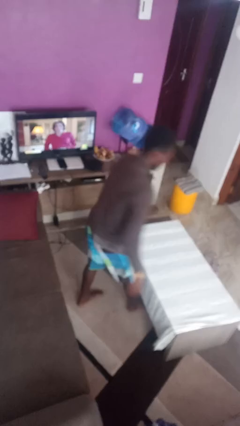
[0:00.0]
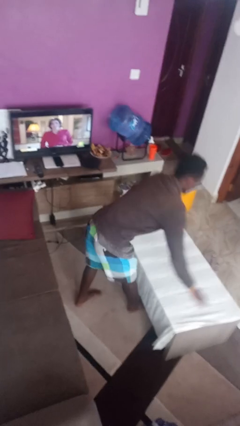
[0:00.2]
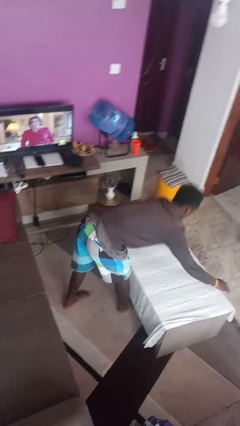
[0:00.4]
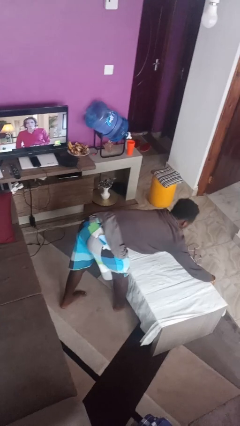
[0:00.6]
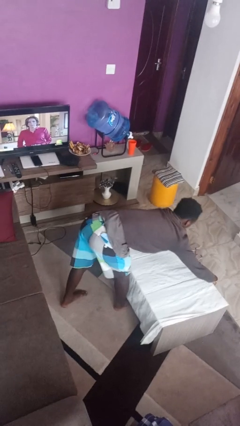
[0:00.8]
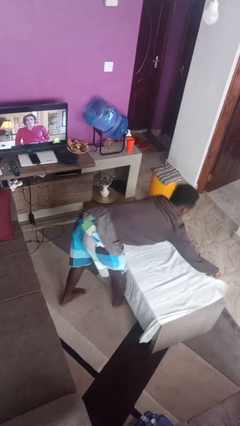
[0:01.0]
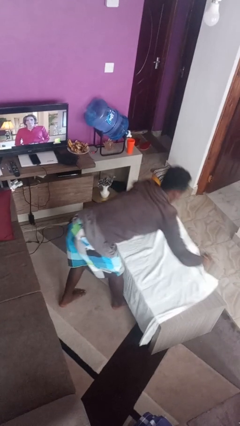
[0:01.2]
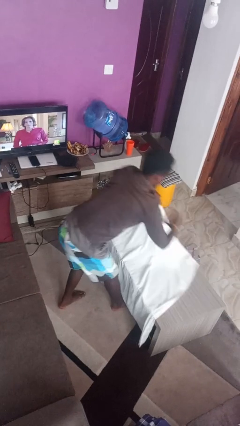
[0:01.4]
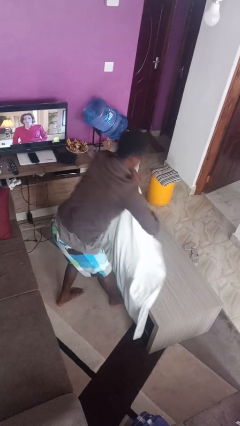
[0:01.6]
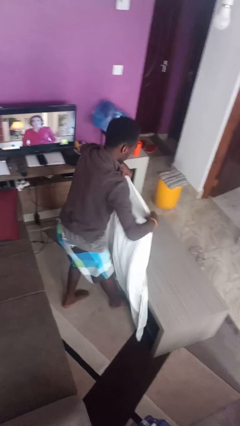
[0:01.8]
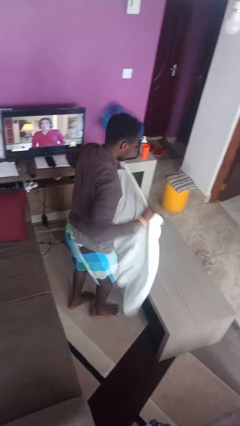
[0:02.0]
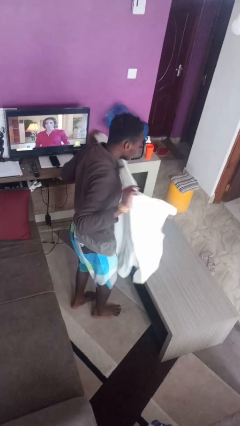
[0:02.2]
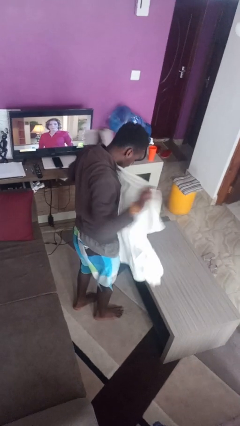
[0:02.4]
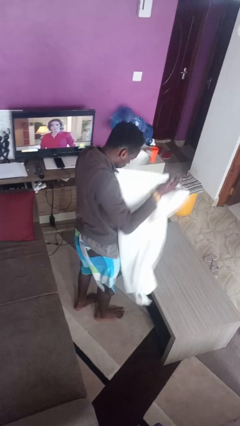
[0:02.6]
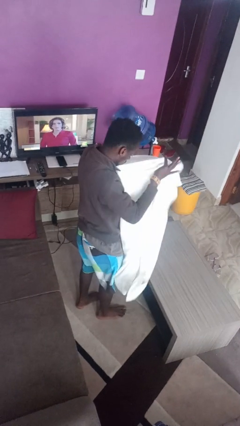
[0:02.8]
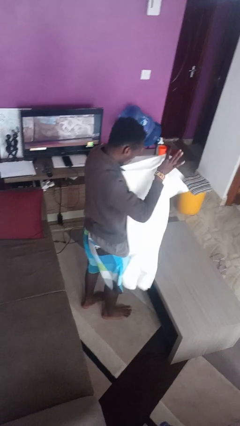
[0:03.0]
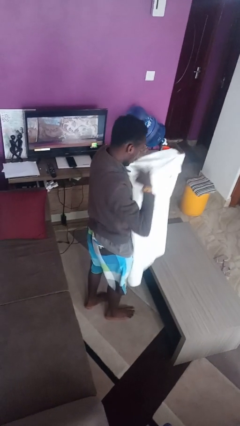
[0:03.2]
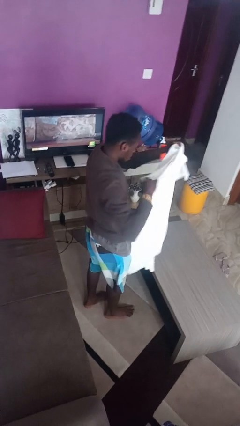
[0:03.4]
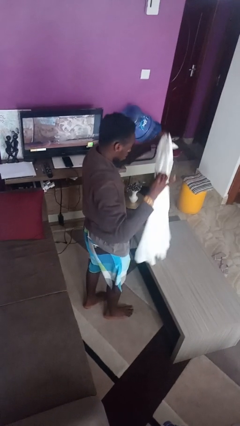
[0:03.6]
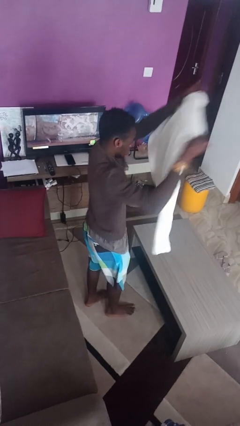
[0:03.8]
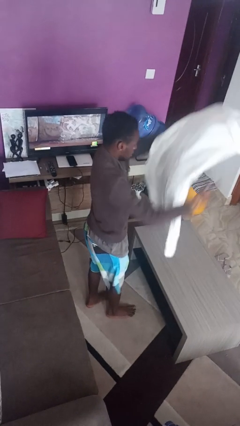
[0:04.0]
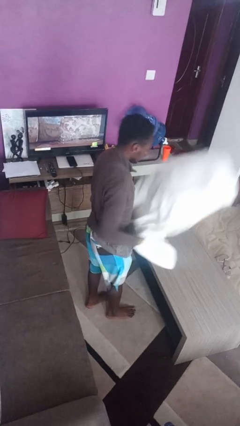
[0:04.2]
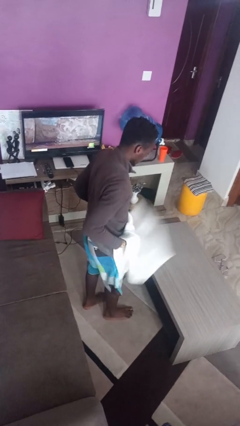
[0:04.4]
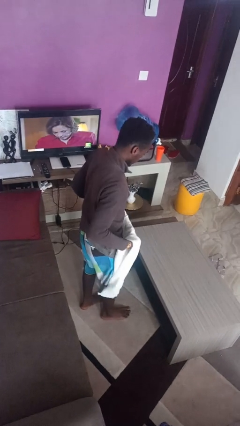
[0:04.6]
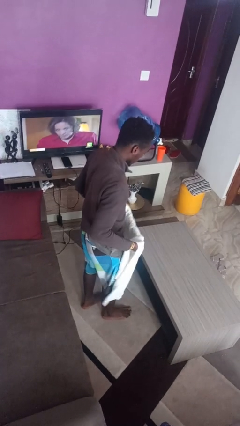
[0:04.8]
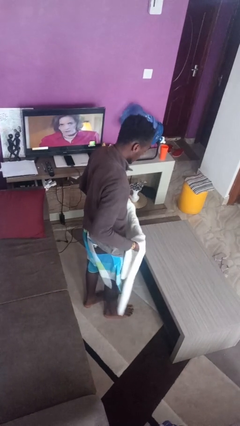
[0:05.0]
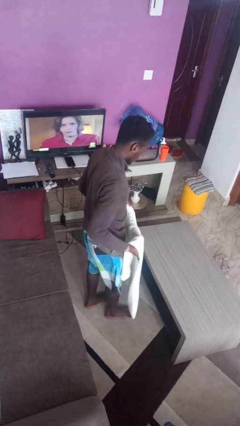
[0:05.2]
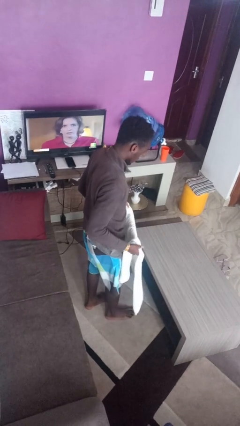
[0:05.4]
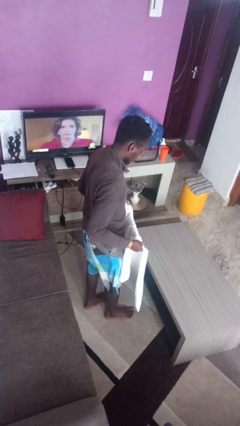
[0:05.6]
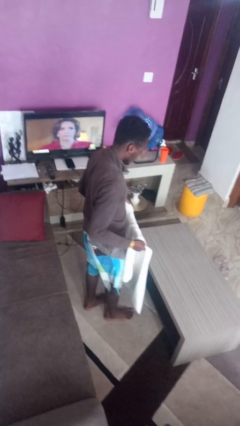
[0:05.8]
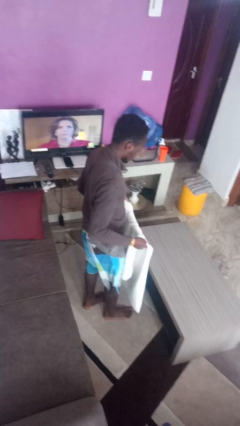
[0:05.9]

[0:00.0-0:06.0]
person folds tablecloth

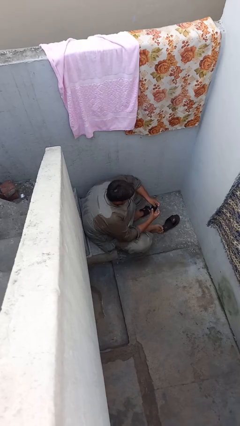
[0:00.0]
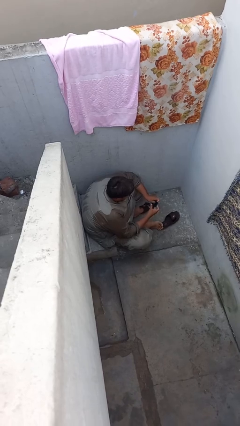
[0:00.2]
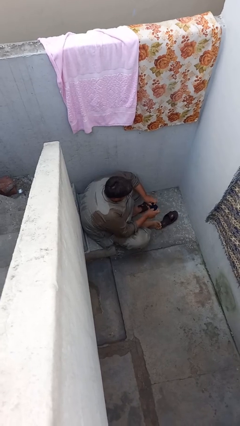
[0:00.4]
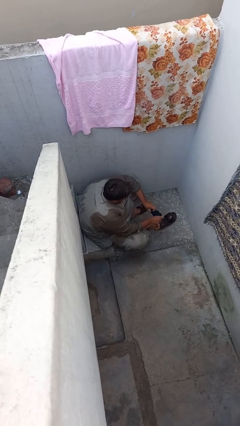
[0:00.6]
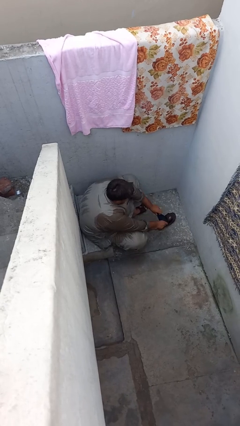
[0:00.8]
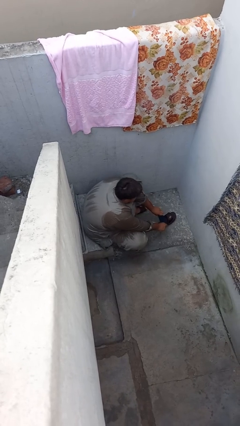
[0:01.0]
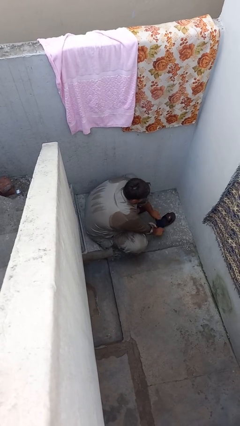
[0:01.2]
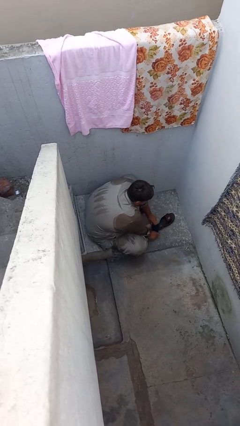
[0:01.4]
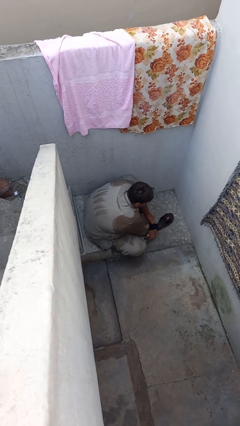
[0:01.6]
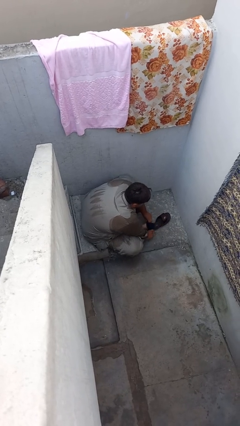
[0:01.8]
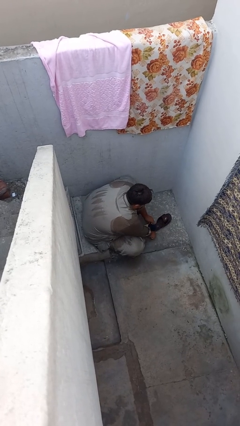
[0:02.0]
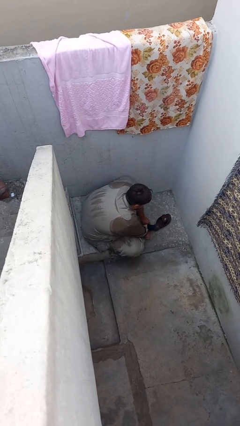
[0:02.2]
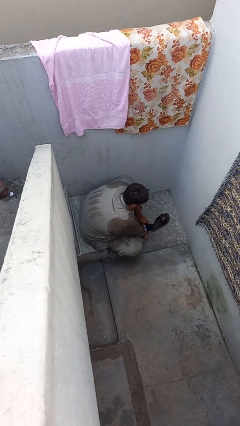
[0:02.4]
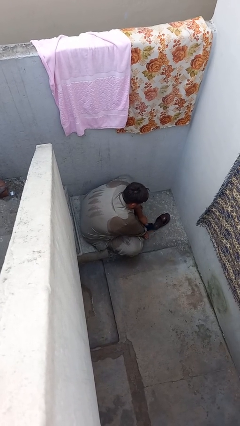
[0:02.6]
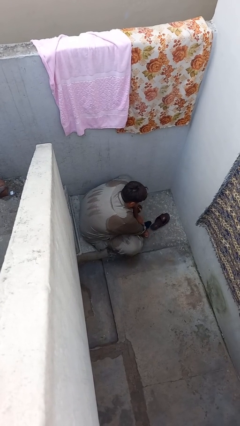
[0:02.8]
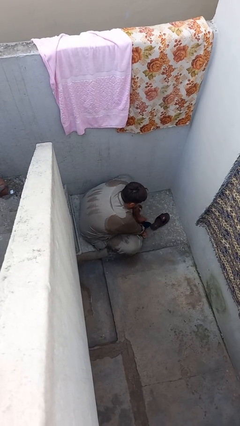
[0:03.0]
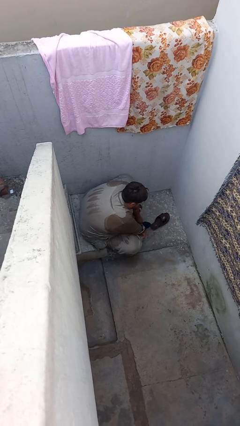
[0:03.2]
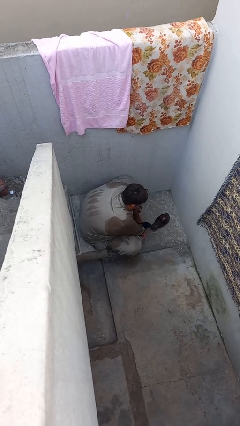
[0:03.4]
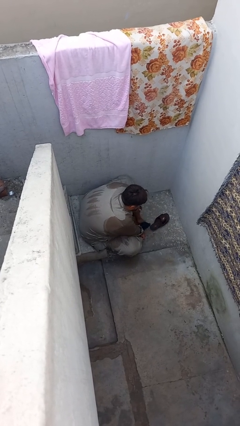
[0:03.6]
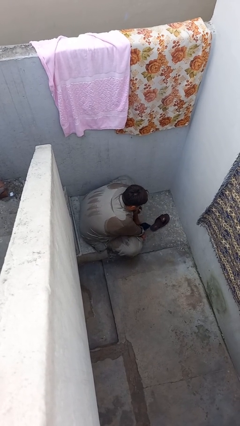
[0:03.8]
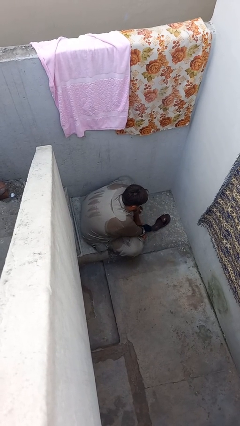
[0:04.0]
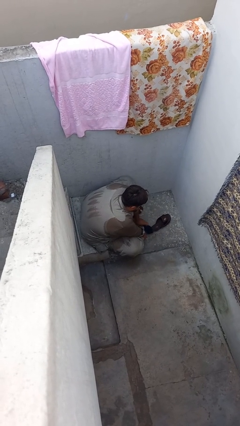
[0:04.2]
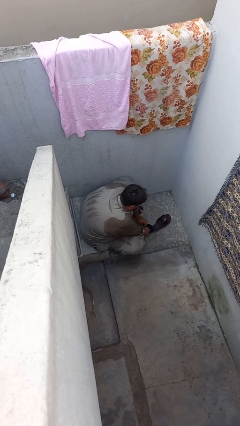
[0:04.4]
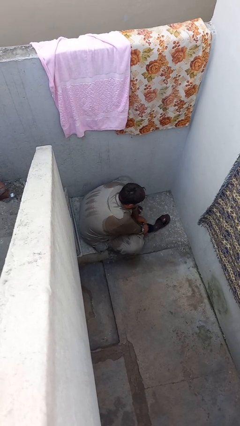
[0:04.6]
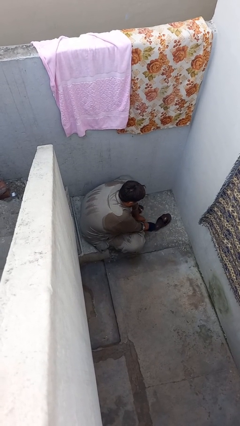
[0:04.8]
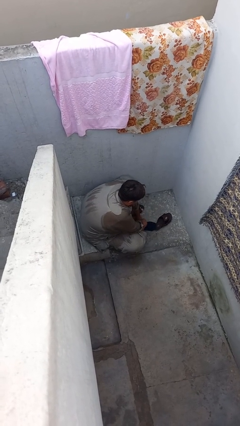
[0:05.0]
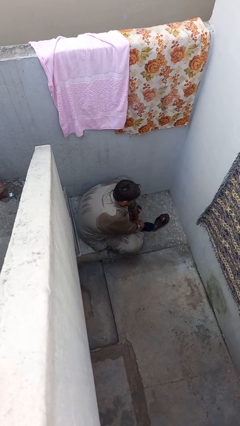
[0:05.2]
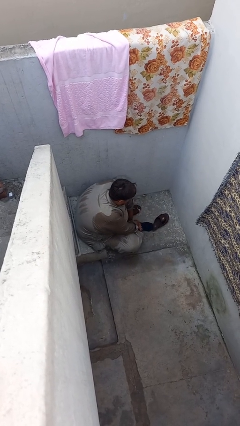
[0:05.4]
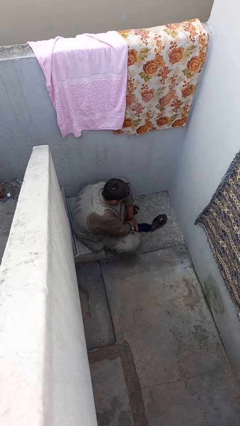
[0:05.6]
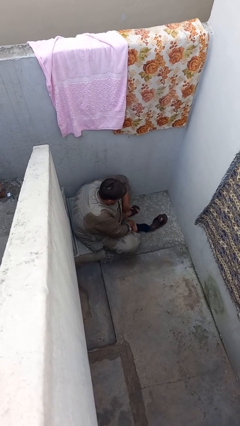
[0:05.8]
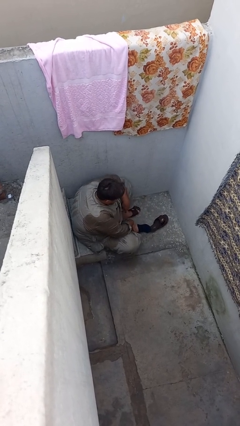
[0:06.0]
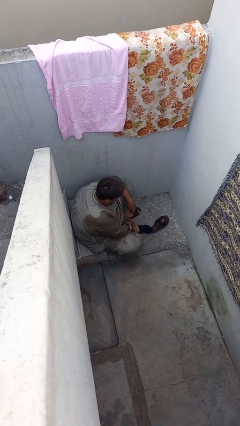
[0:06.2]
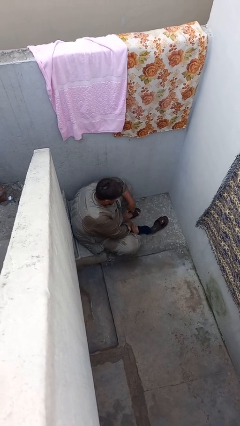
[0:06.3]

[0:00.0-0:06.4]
person puts on socks

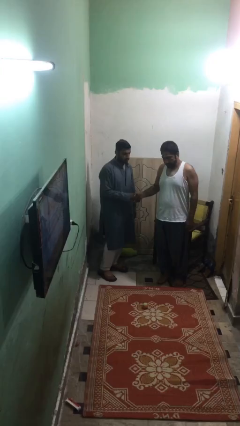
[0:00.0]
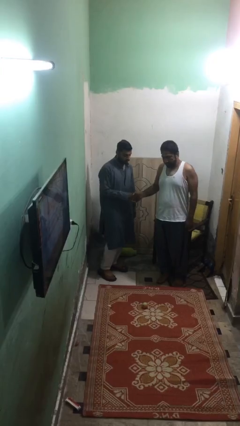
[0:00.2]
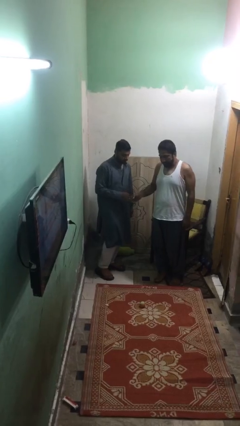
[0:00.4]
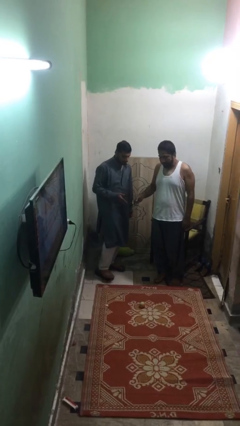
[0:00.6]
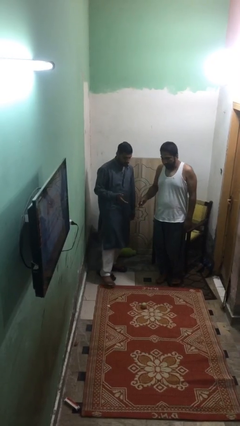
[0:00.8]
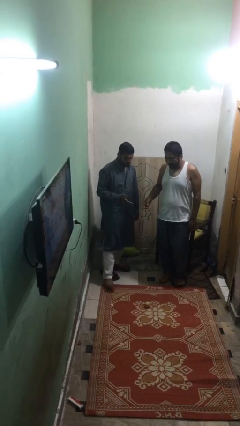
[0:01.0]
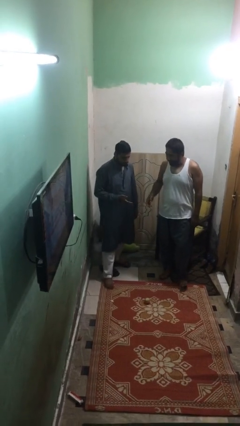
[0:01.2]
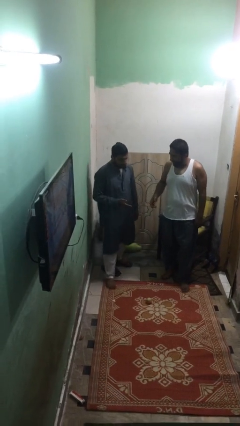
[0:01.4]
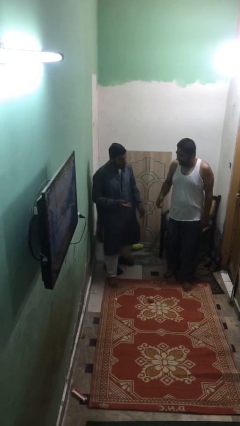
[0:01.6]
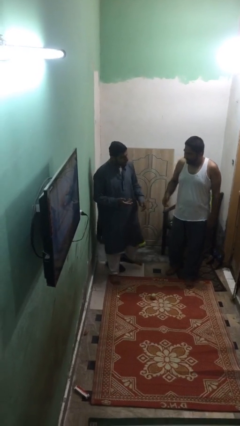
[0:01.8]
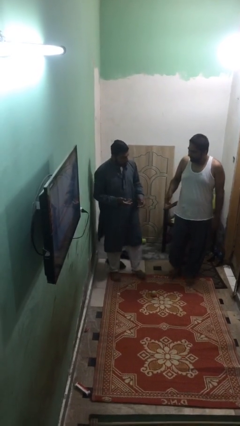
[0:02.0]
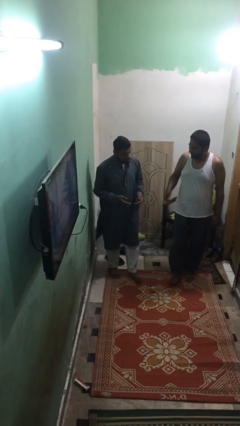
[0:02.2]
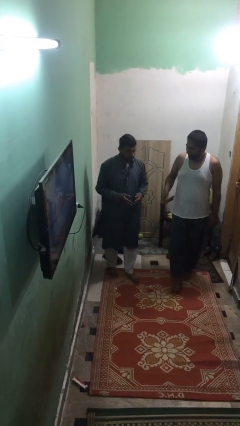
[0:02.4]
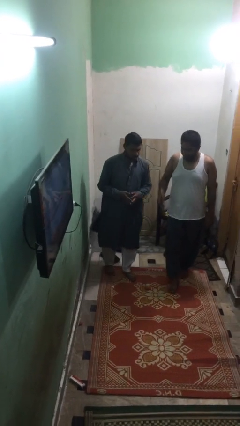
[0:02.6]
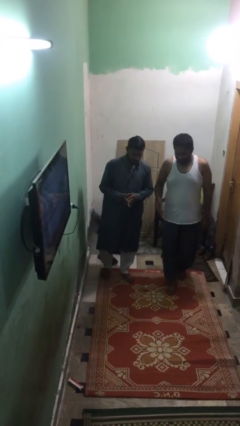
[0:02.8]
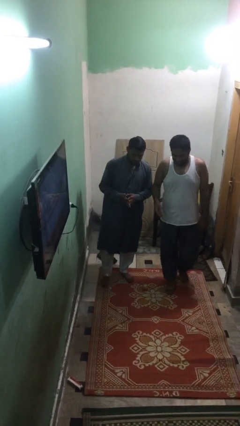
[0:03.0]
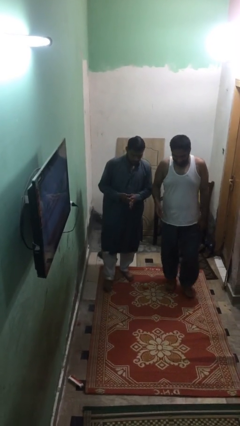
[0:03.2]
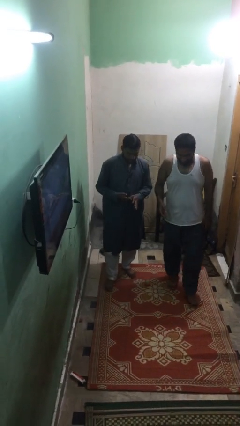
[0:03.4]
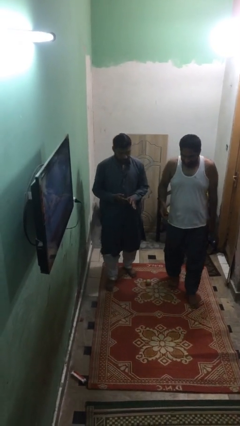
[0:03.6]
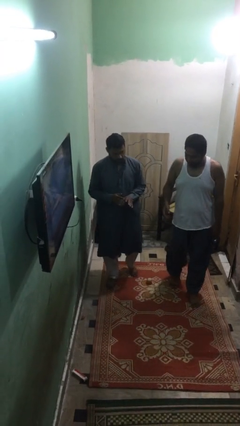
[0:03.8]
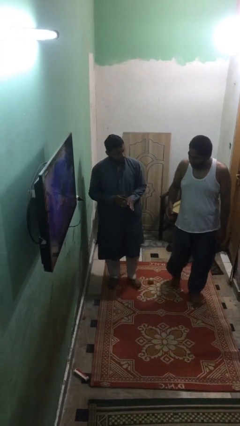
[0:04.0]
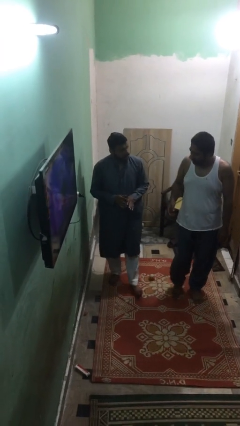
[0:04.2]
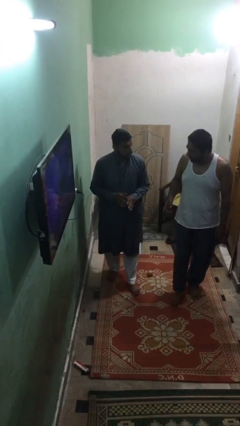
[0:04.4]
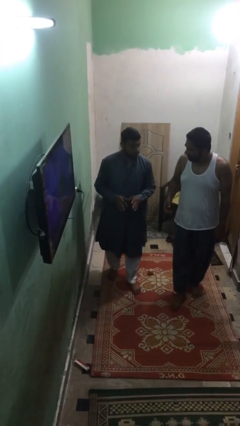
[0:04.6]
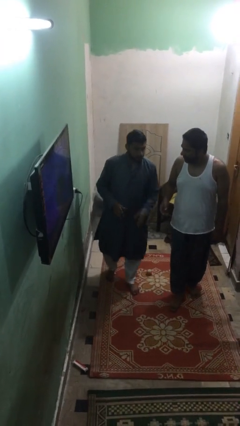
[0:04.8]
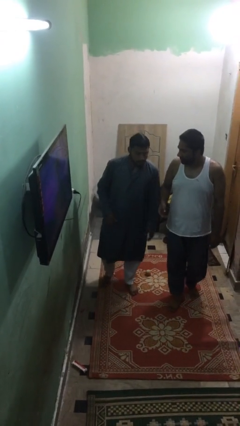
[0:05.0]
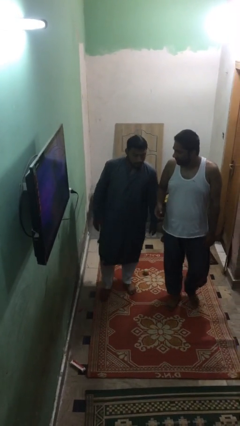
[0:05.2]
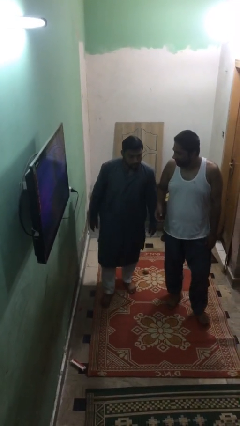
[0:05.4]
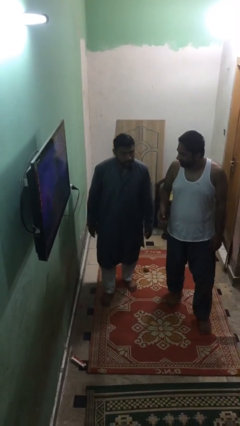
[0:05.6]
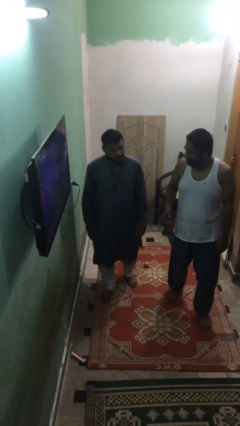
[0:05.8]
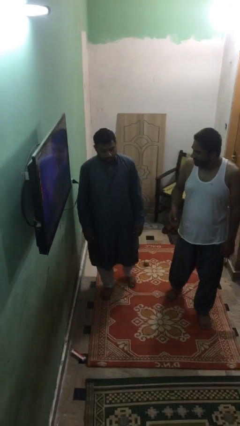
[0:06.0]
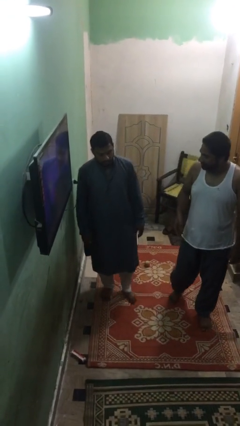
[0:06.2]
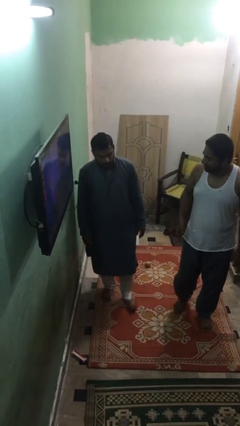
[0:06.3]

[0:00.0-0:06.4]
person talks to person
